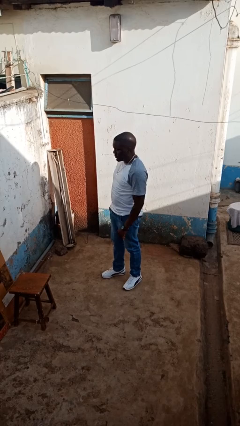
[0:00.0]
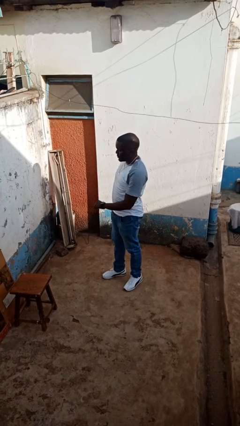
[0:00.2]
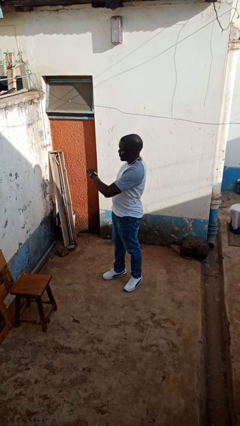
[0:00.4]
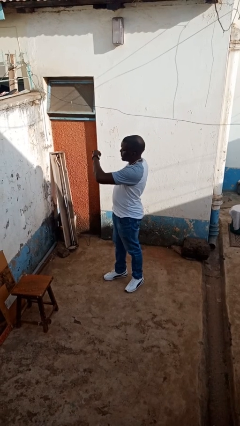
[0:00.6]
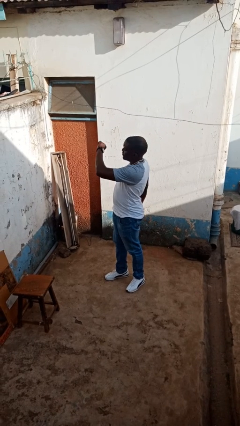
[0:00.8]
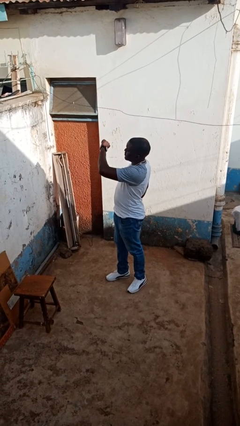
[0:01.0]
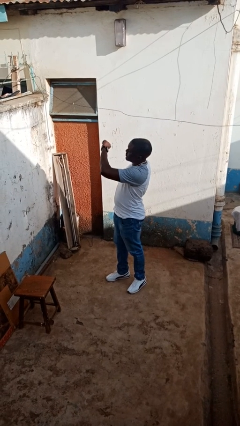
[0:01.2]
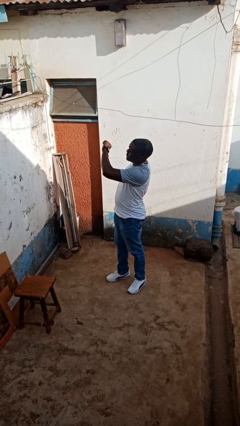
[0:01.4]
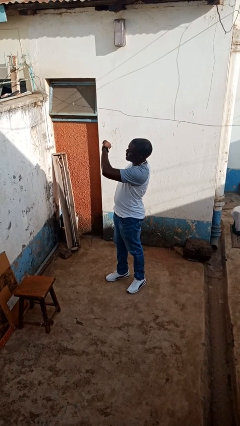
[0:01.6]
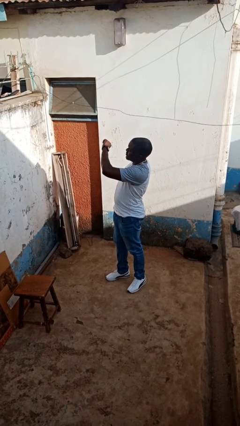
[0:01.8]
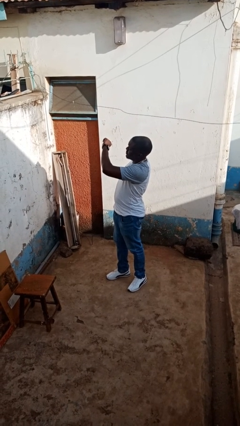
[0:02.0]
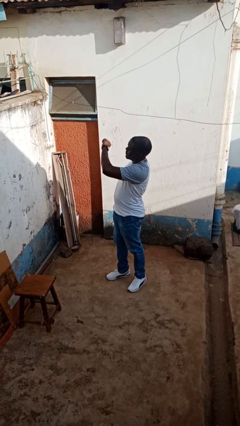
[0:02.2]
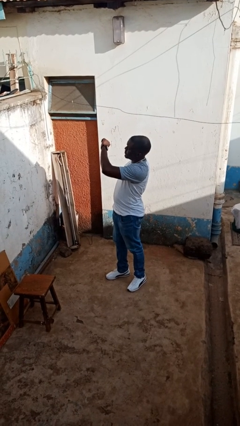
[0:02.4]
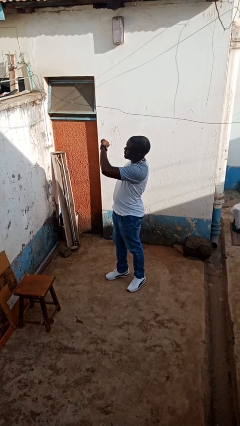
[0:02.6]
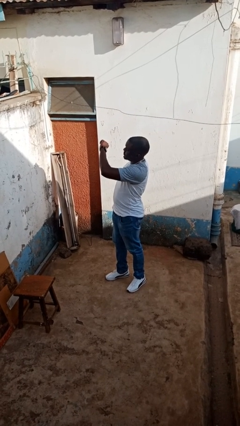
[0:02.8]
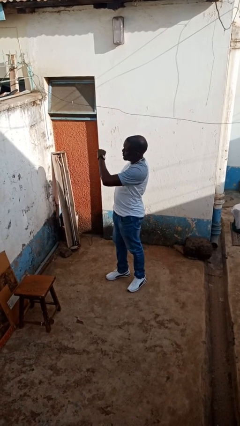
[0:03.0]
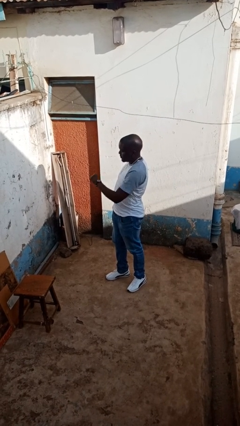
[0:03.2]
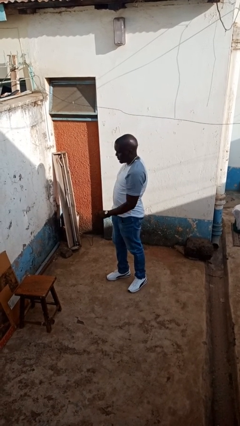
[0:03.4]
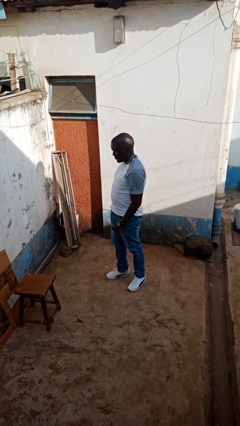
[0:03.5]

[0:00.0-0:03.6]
person looks at wristwatch

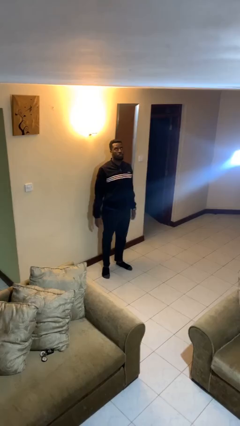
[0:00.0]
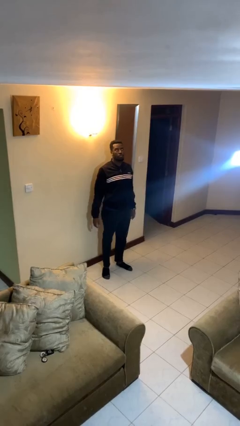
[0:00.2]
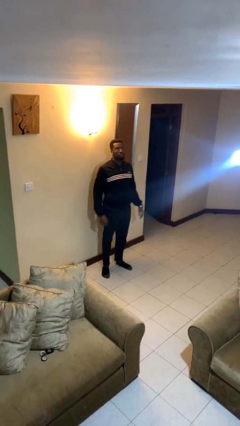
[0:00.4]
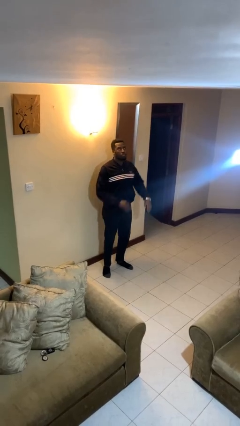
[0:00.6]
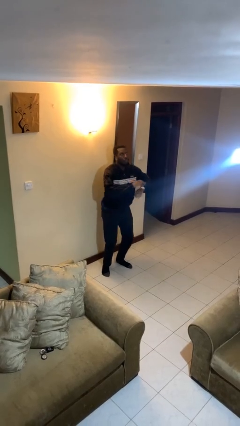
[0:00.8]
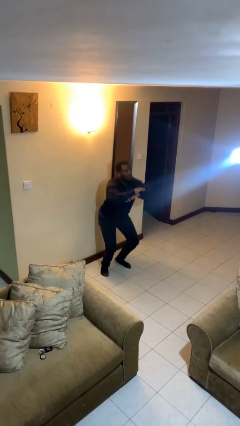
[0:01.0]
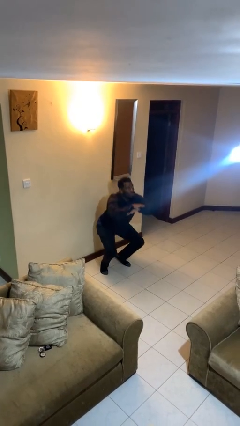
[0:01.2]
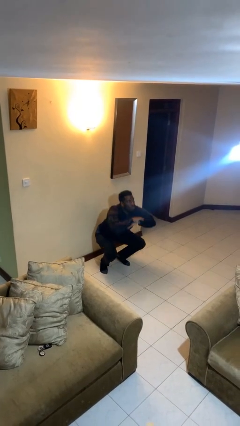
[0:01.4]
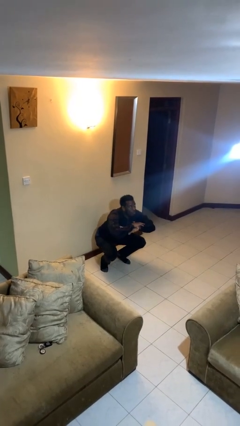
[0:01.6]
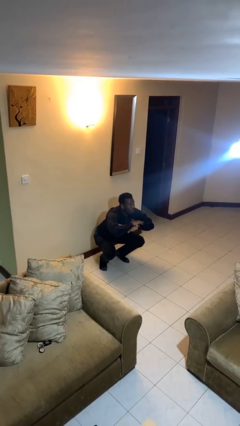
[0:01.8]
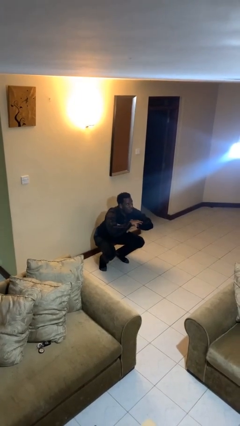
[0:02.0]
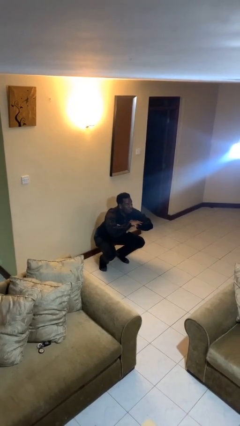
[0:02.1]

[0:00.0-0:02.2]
person squats

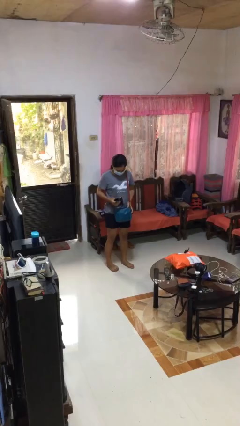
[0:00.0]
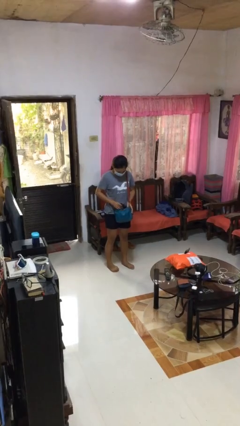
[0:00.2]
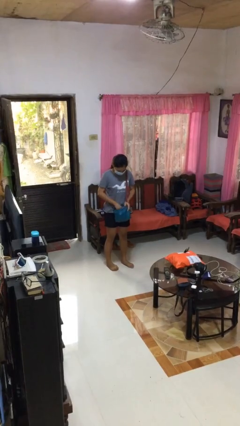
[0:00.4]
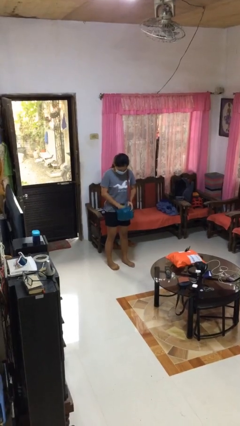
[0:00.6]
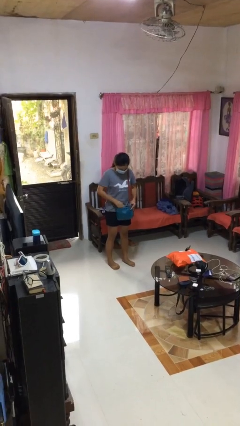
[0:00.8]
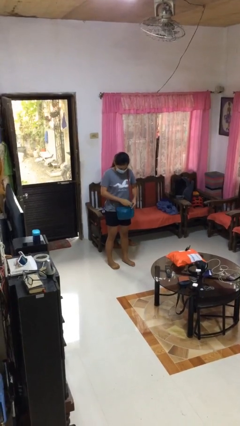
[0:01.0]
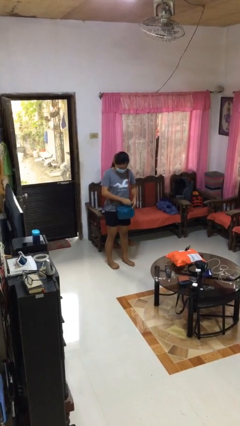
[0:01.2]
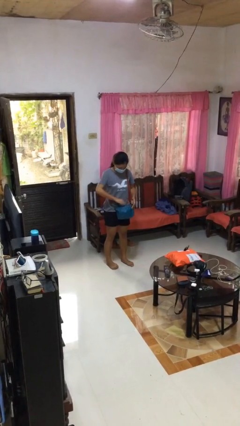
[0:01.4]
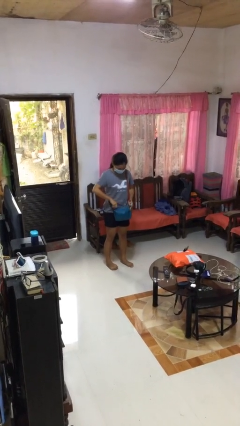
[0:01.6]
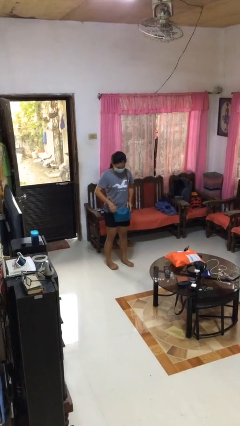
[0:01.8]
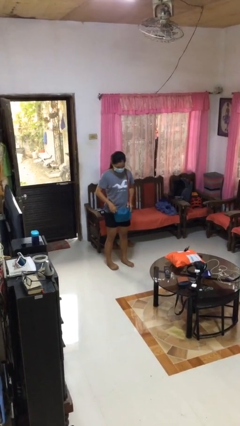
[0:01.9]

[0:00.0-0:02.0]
person puts object into purse

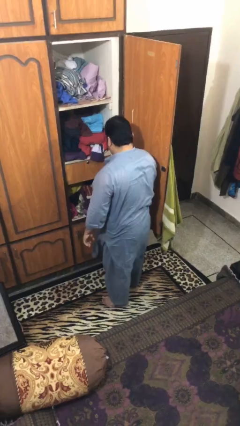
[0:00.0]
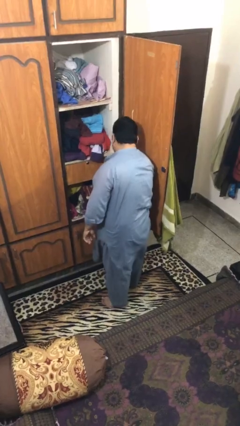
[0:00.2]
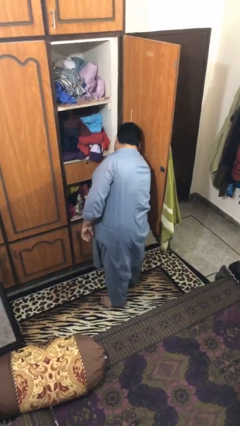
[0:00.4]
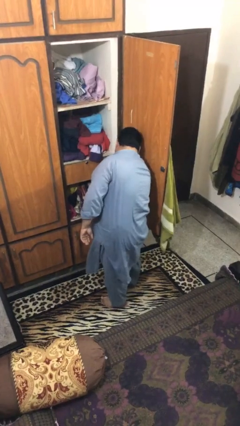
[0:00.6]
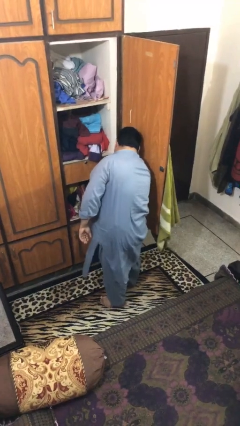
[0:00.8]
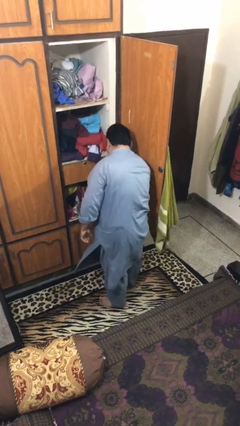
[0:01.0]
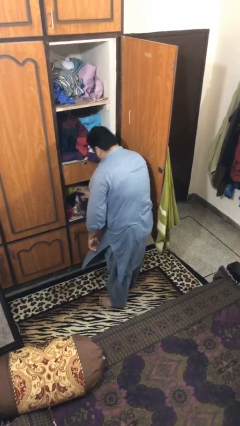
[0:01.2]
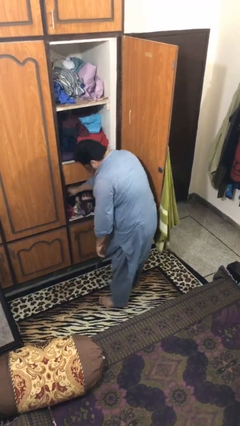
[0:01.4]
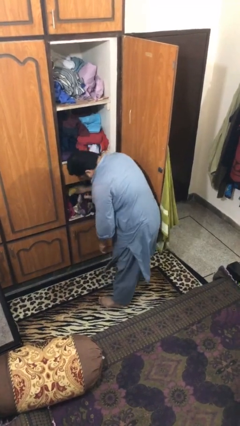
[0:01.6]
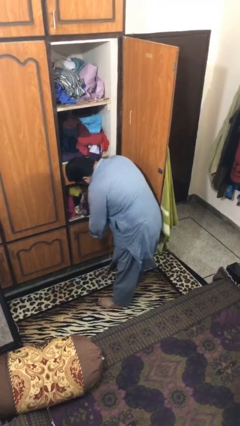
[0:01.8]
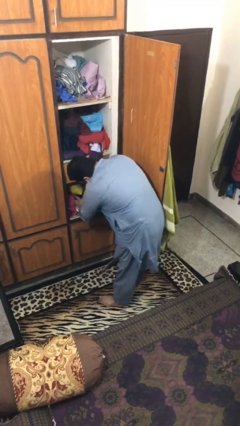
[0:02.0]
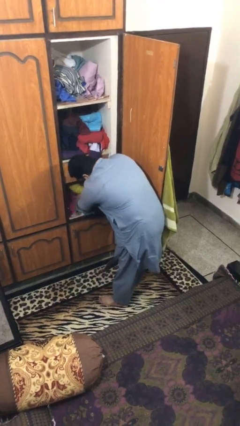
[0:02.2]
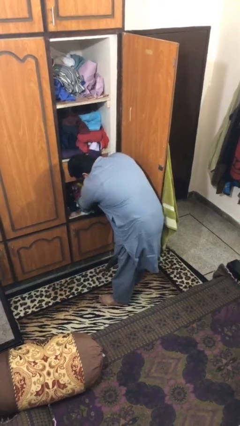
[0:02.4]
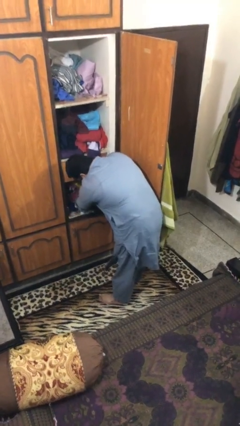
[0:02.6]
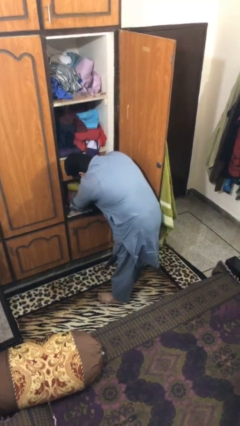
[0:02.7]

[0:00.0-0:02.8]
person searches in cabinet

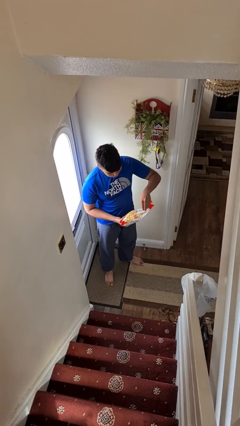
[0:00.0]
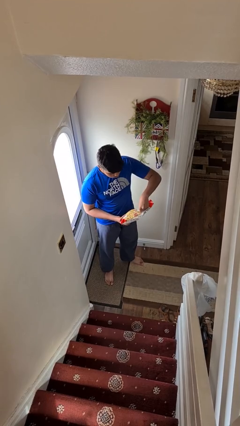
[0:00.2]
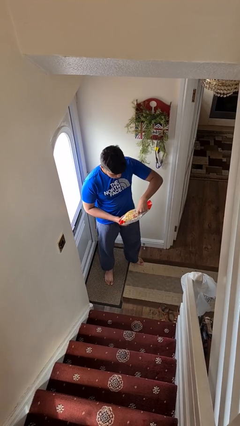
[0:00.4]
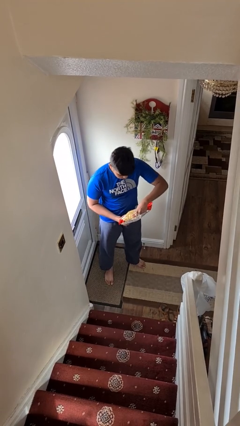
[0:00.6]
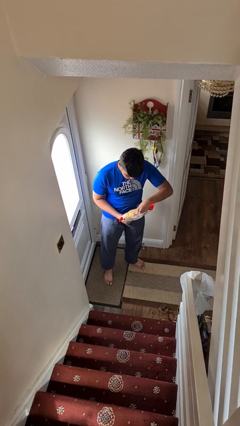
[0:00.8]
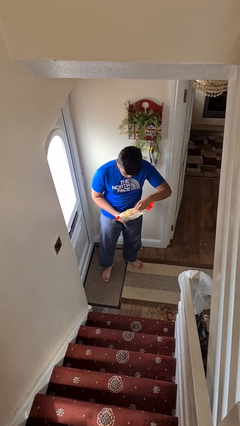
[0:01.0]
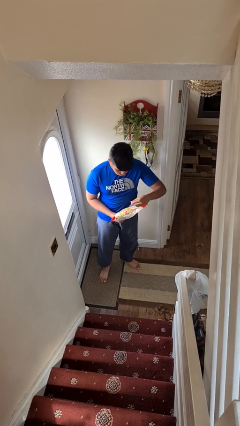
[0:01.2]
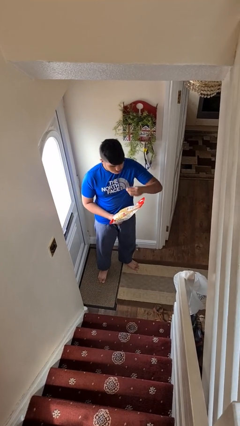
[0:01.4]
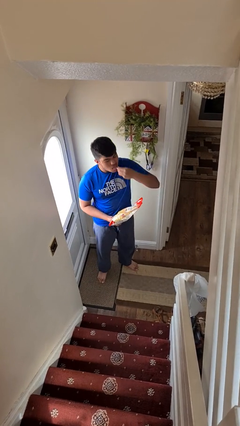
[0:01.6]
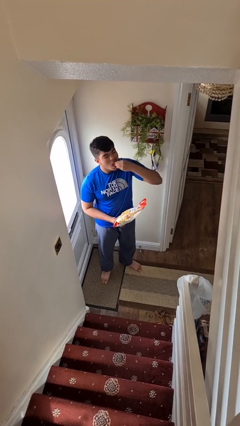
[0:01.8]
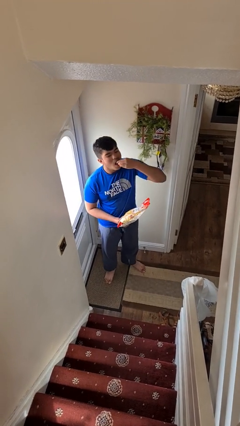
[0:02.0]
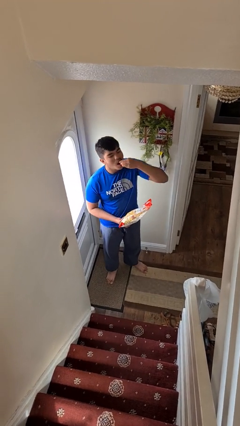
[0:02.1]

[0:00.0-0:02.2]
person eats snack from bag

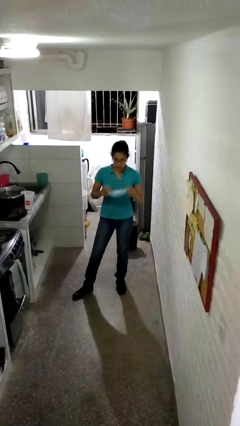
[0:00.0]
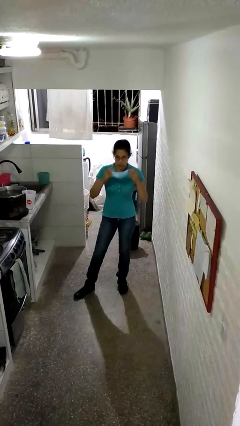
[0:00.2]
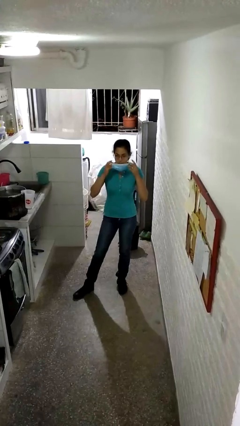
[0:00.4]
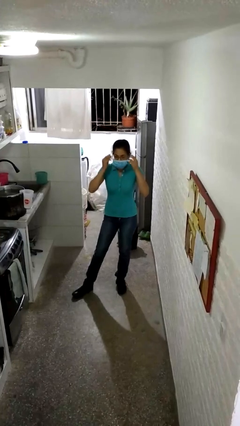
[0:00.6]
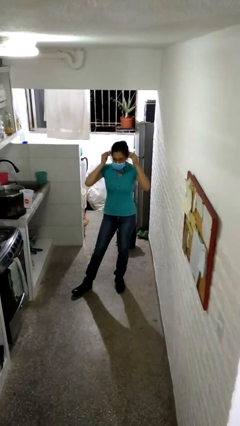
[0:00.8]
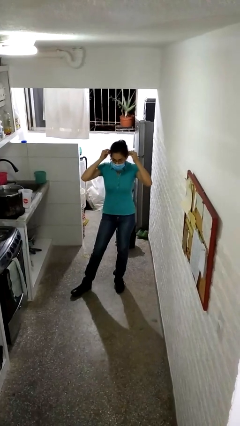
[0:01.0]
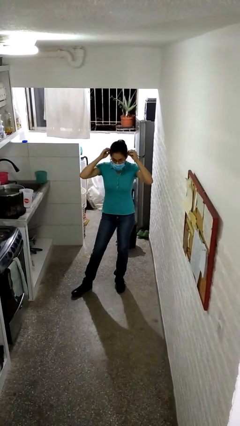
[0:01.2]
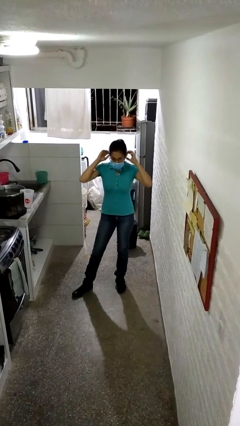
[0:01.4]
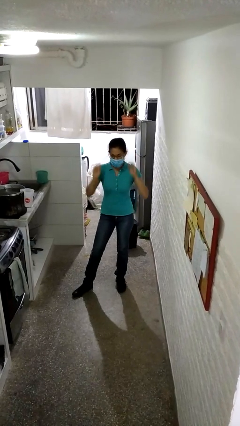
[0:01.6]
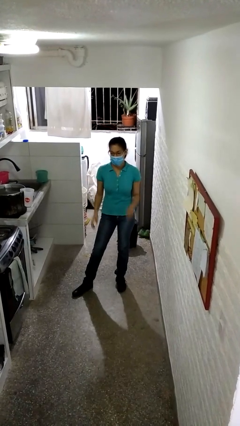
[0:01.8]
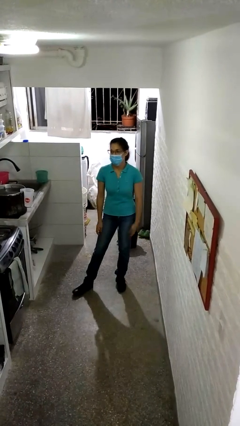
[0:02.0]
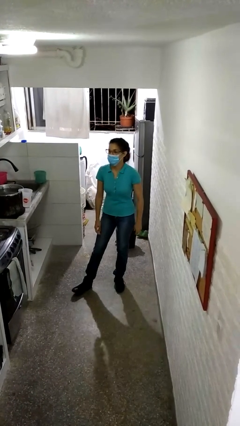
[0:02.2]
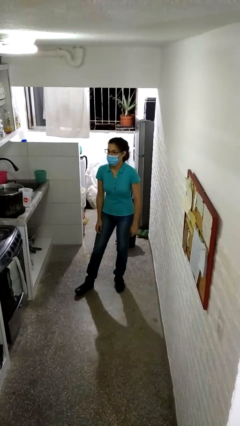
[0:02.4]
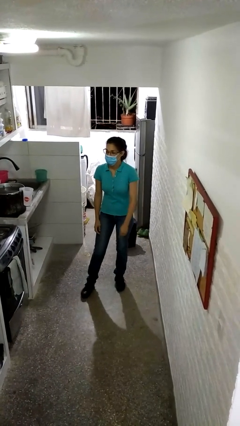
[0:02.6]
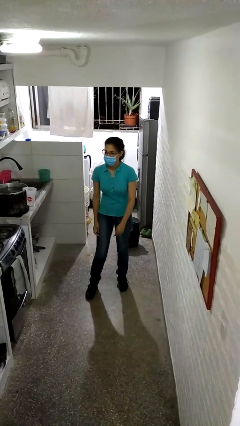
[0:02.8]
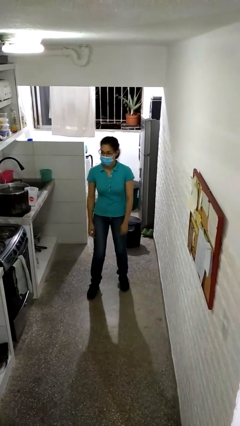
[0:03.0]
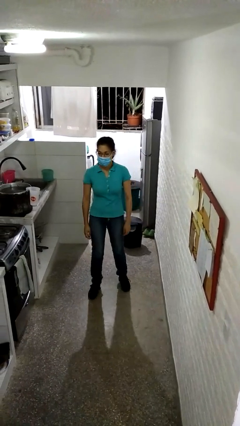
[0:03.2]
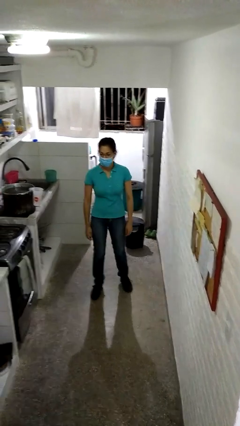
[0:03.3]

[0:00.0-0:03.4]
person puts on facemask

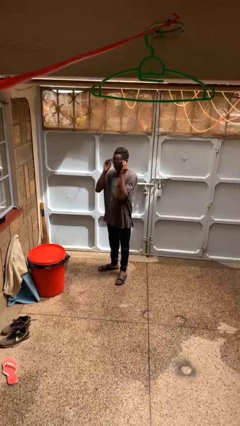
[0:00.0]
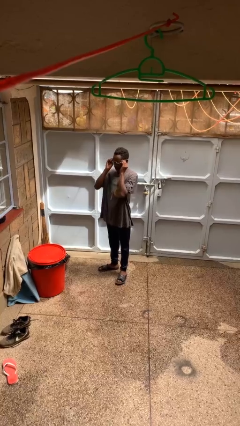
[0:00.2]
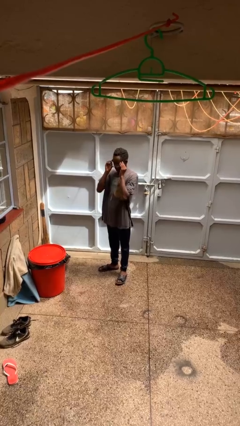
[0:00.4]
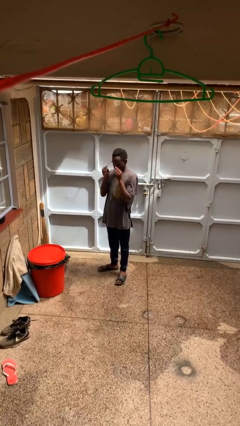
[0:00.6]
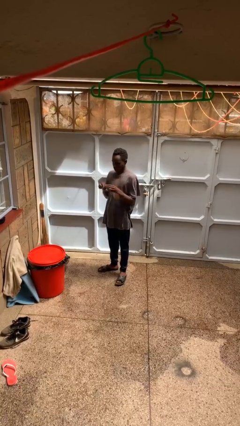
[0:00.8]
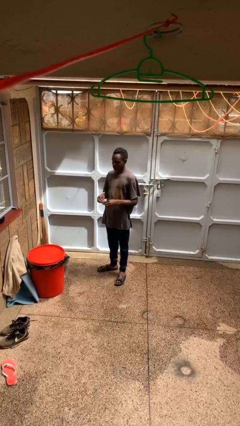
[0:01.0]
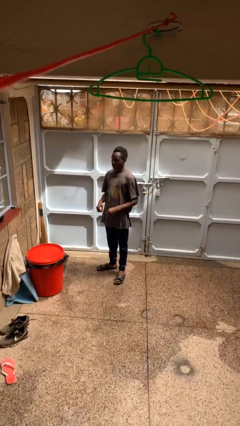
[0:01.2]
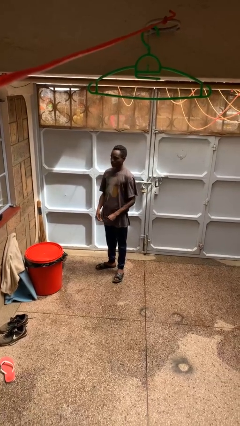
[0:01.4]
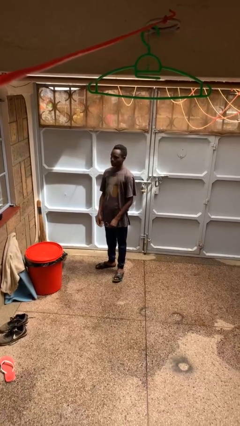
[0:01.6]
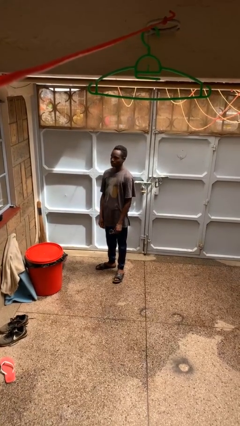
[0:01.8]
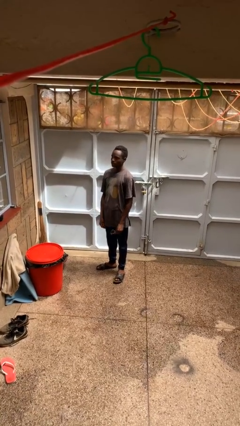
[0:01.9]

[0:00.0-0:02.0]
person takes off glasses
